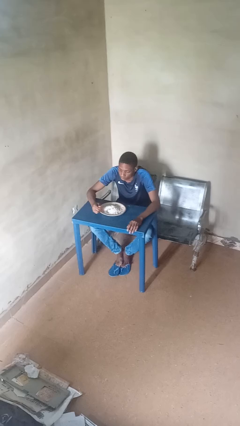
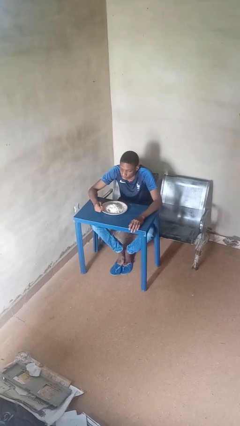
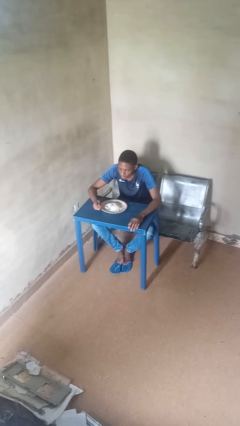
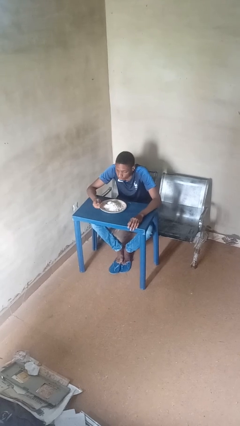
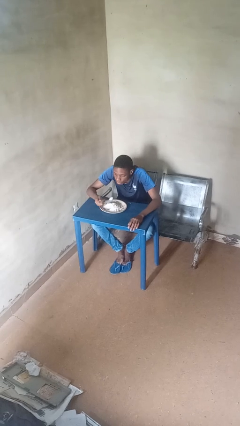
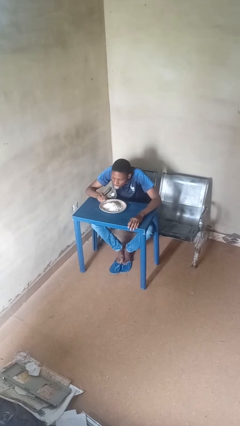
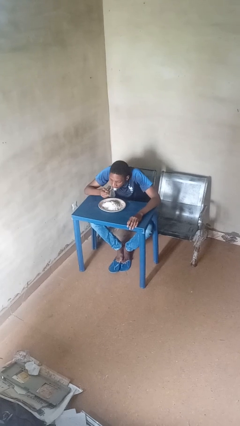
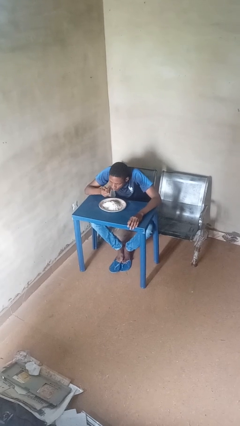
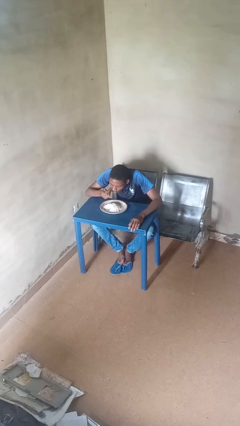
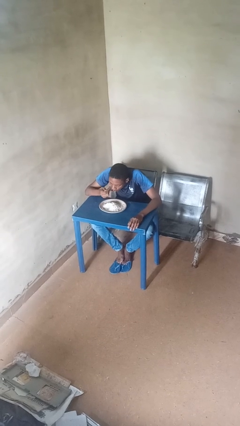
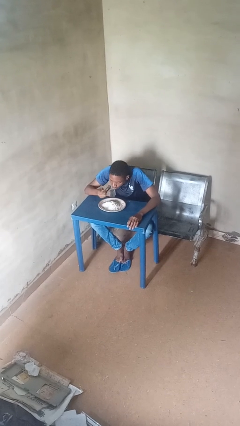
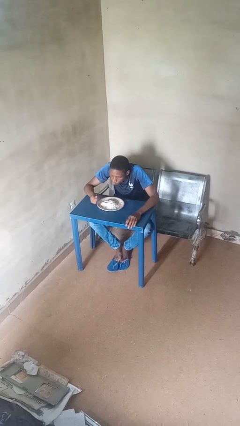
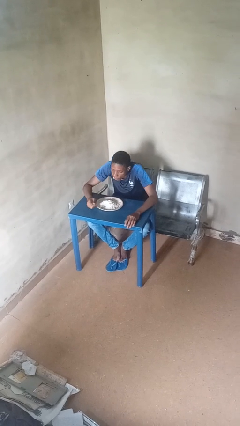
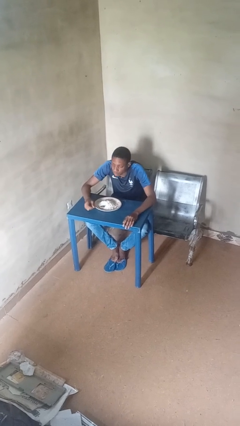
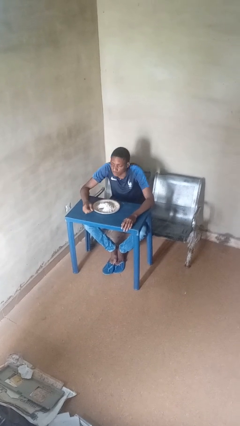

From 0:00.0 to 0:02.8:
person eats with utensil

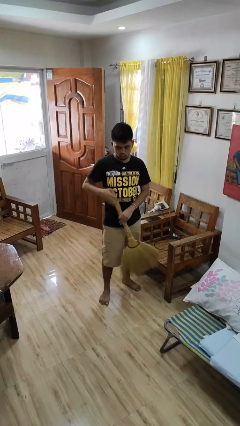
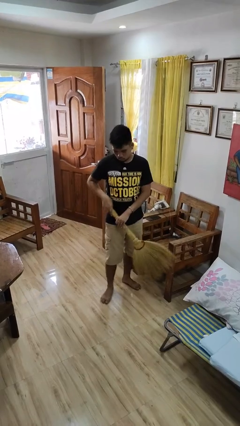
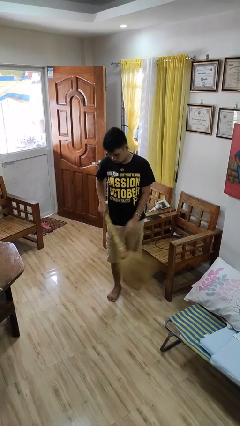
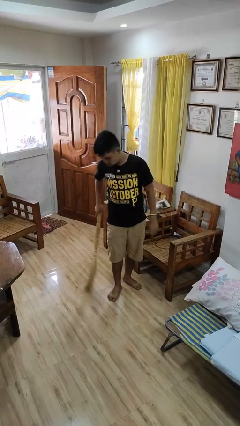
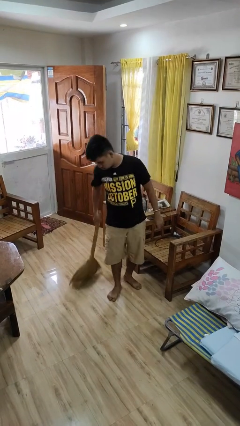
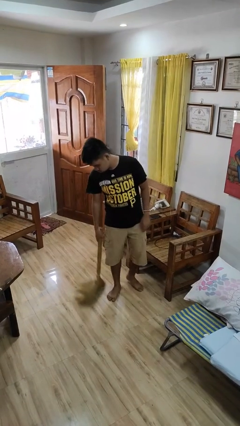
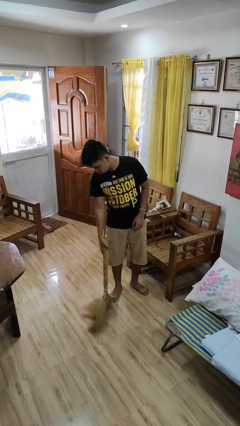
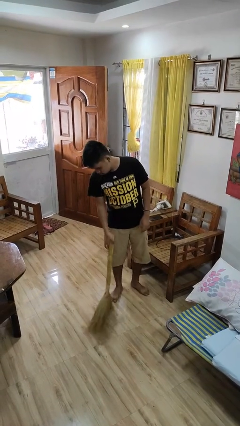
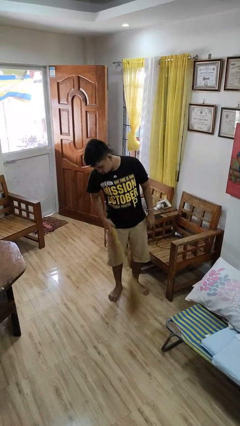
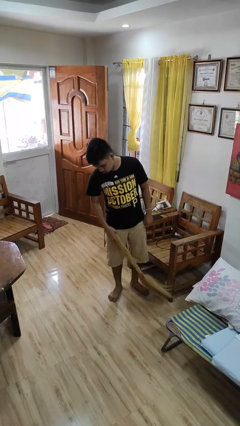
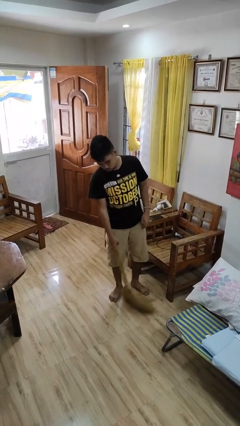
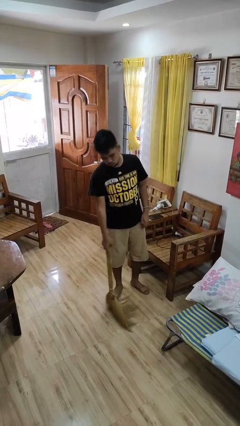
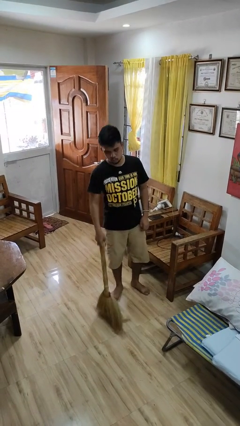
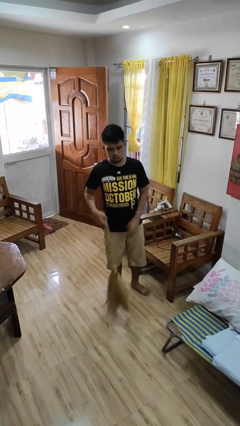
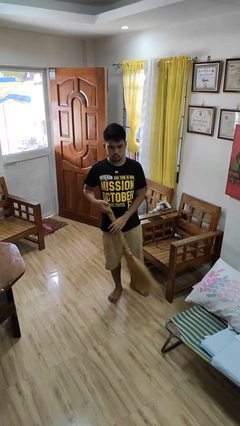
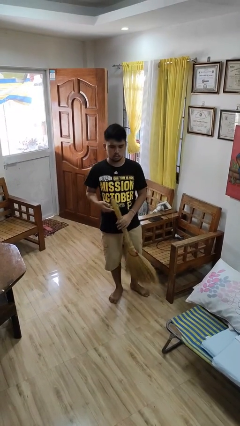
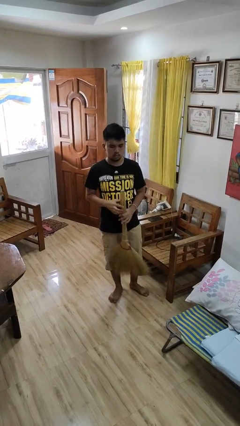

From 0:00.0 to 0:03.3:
person sweeps floor

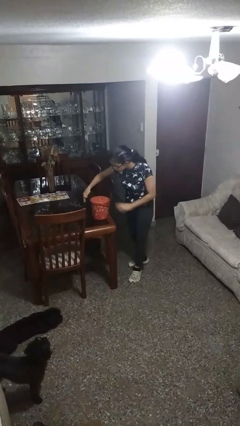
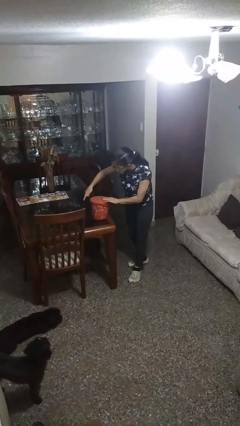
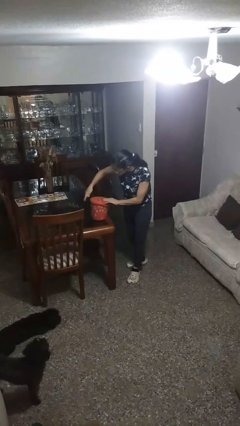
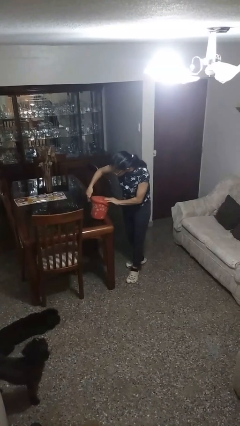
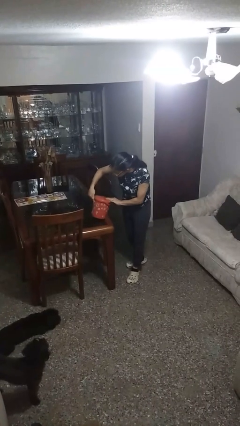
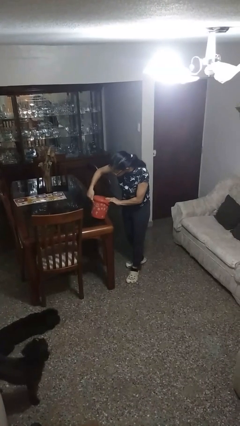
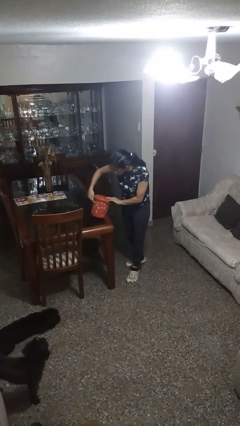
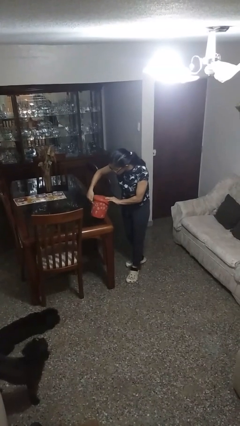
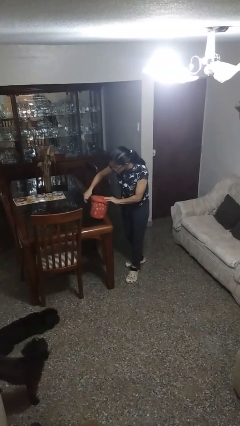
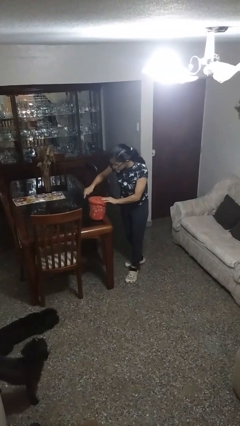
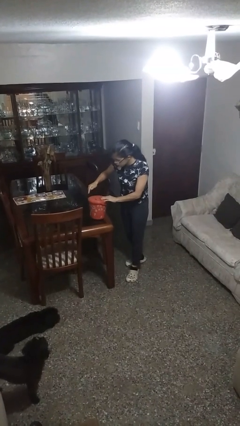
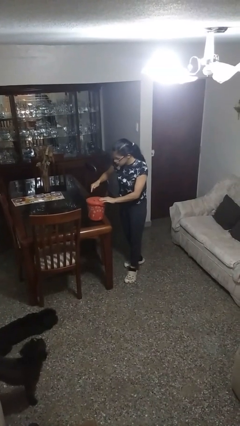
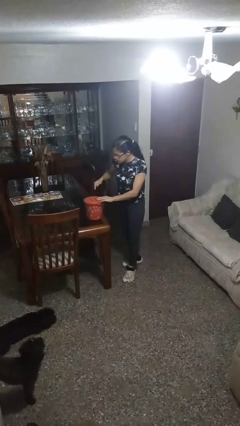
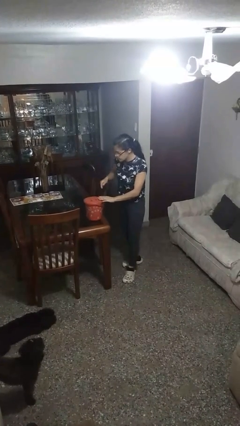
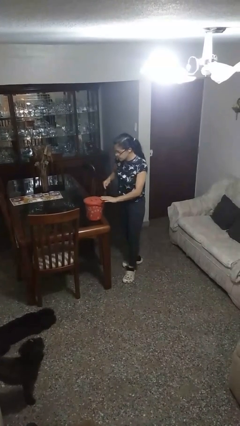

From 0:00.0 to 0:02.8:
person taps object with finger

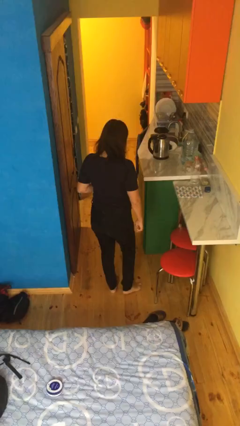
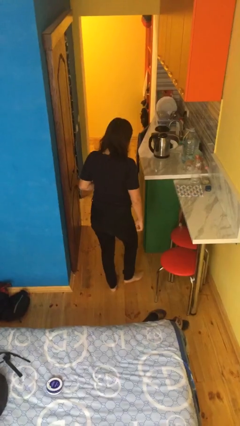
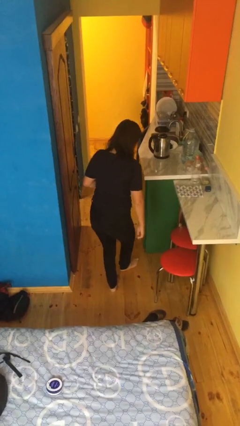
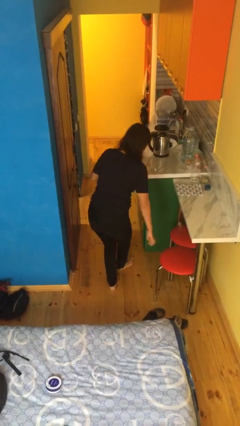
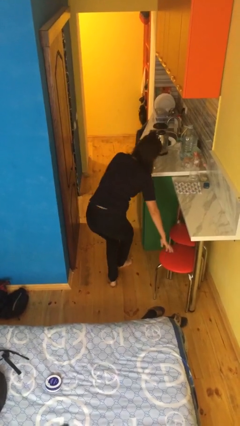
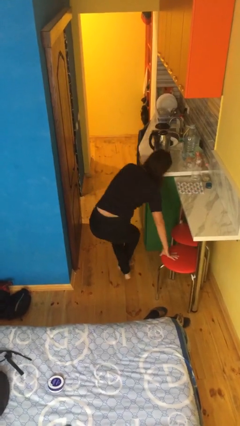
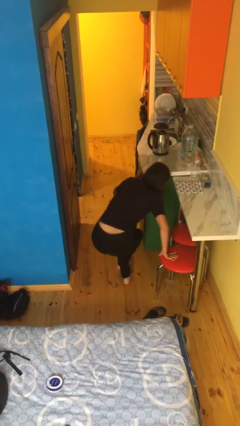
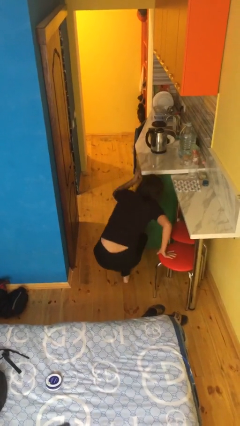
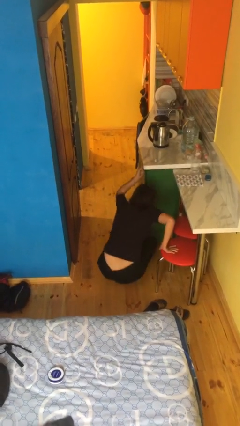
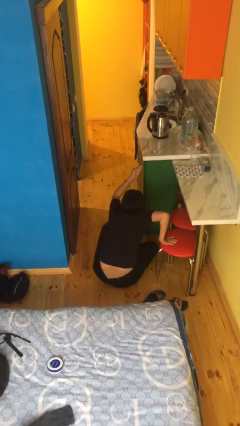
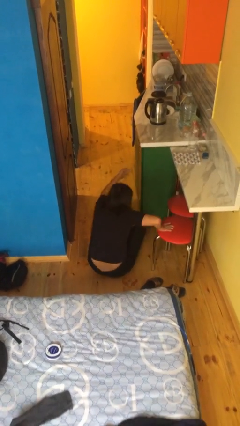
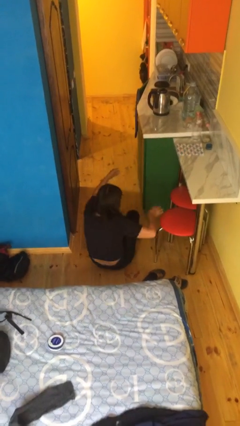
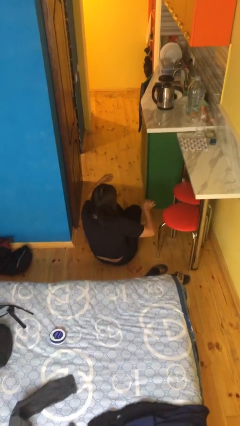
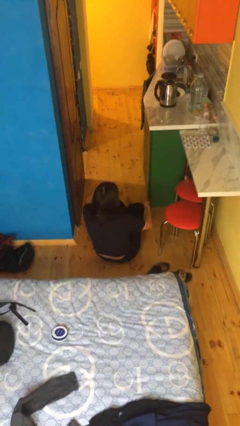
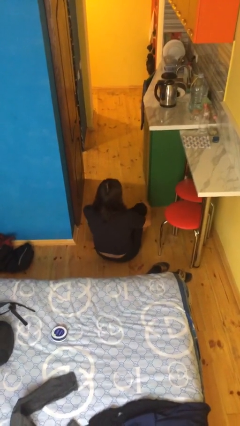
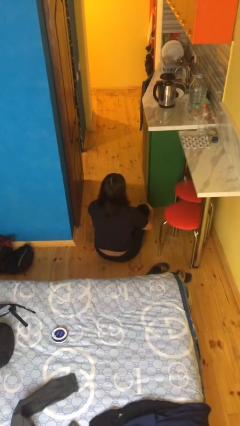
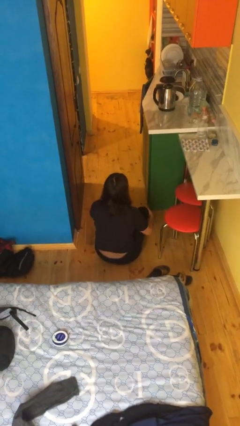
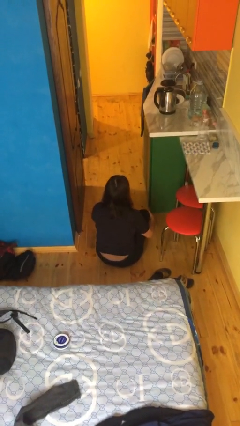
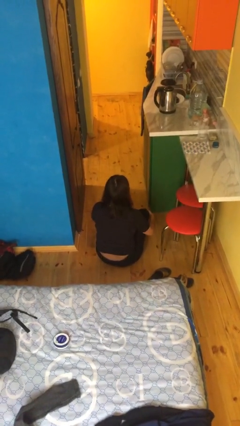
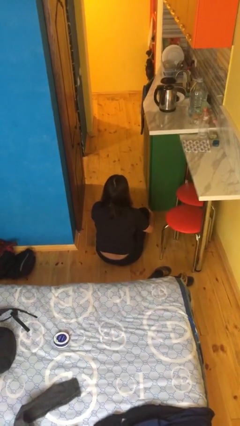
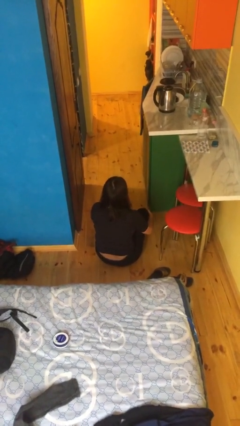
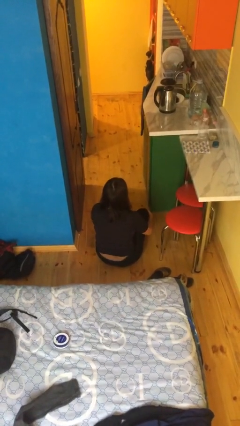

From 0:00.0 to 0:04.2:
person sits crisscross

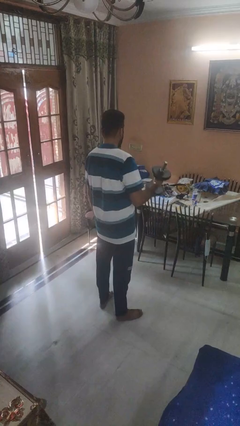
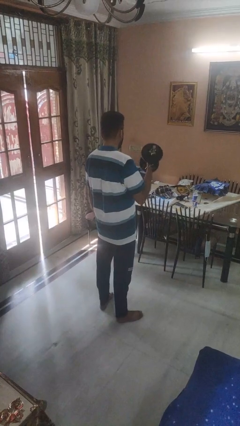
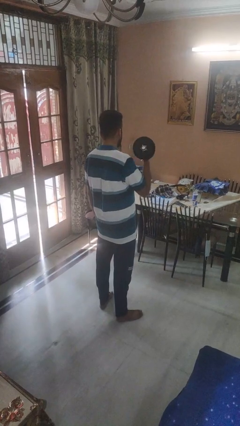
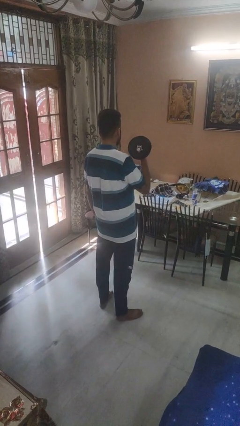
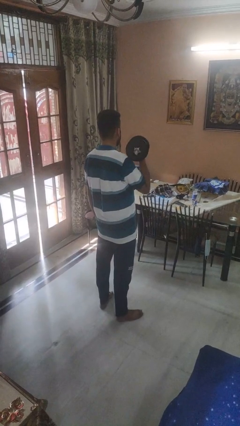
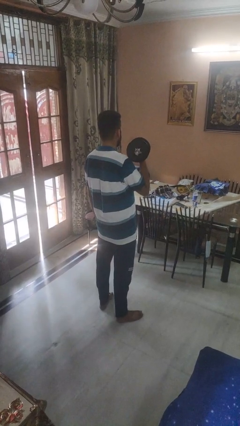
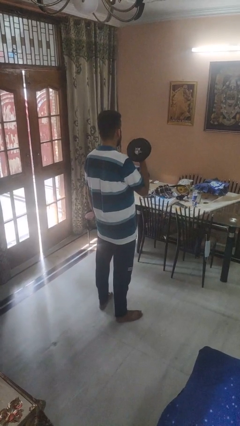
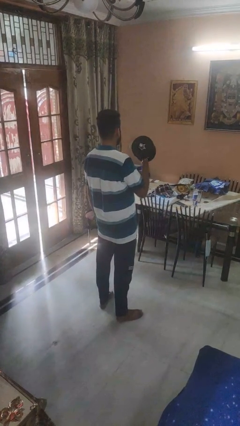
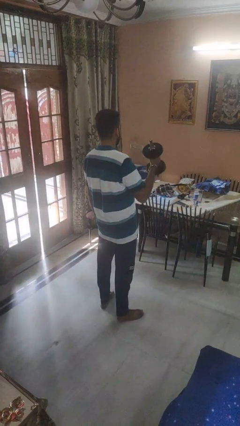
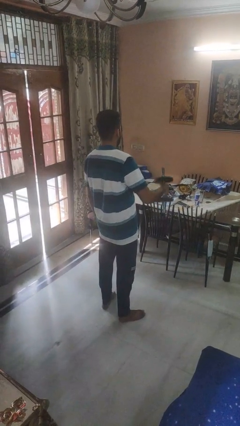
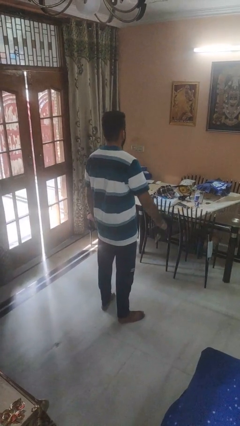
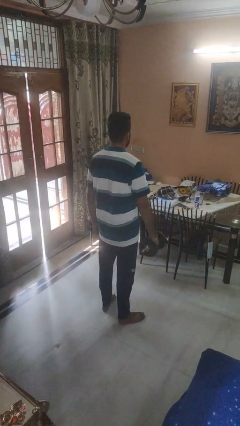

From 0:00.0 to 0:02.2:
person lifts dumbbells

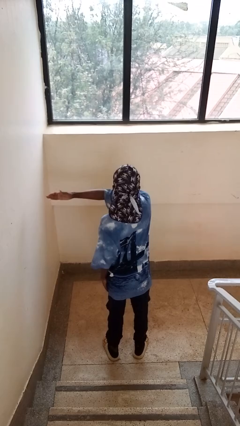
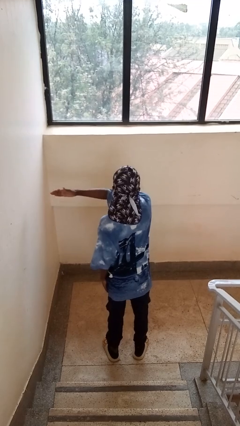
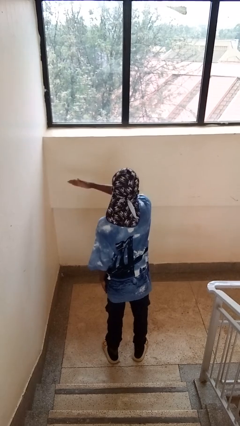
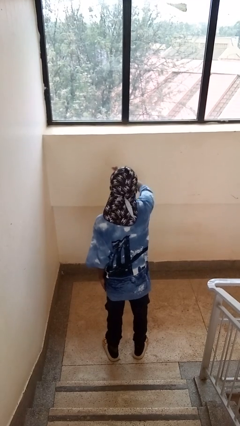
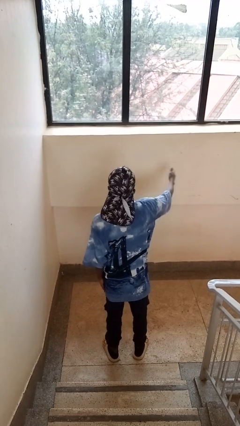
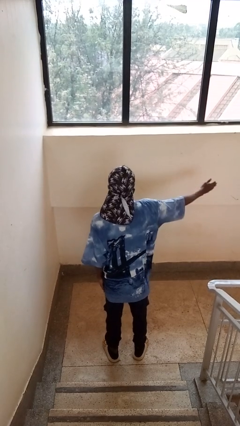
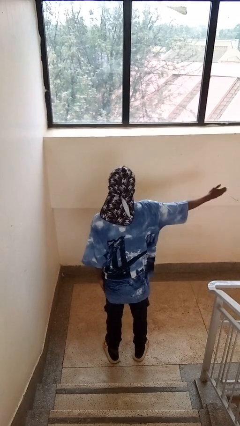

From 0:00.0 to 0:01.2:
person gestures swipe right

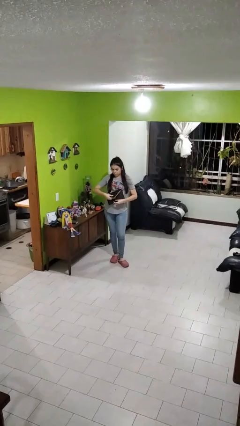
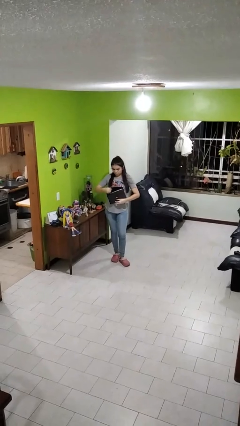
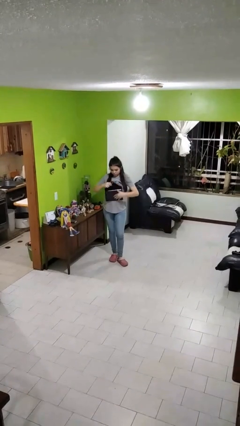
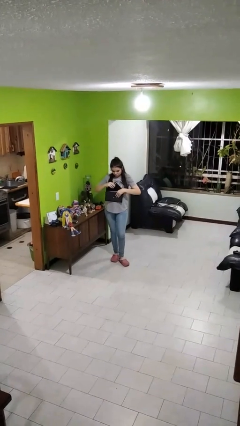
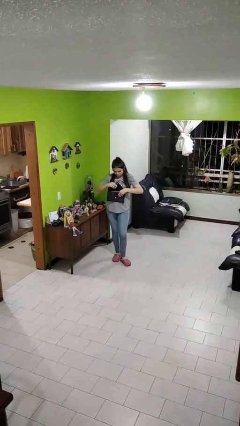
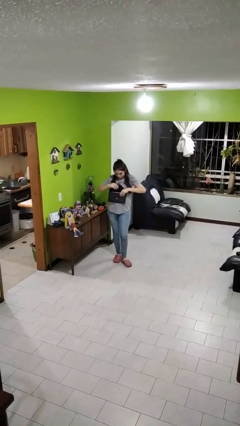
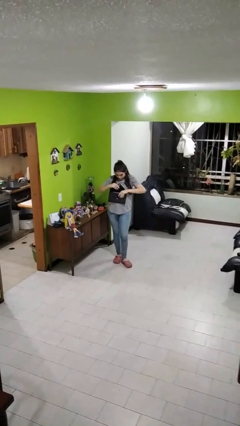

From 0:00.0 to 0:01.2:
person searches in purse
